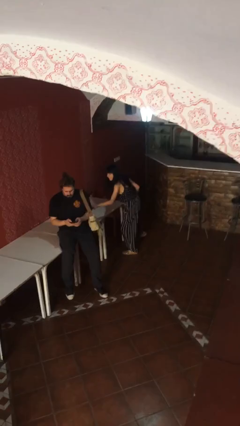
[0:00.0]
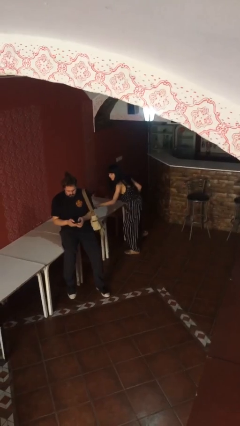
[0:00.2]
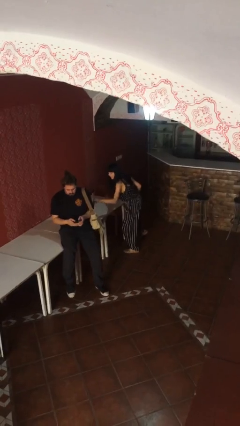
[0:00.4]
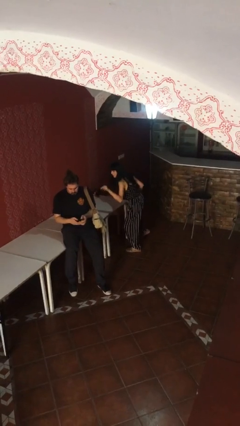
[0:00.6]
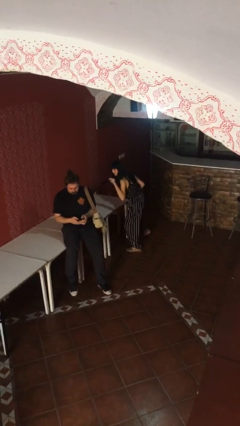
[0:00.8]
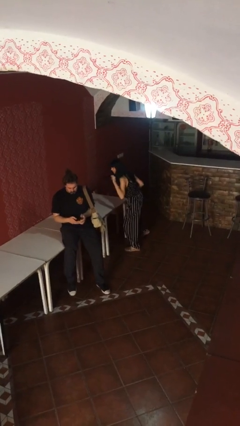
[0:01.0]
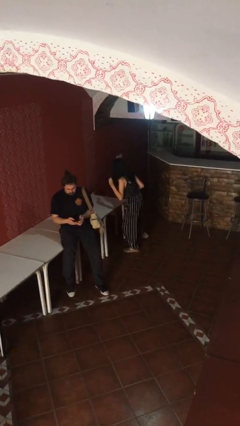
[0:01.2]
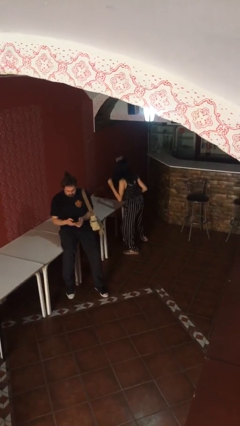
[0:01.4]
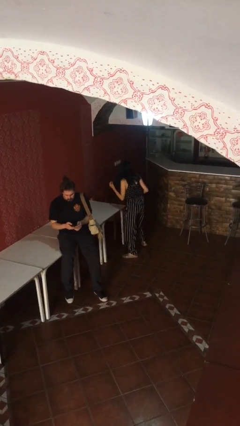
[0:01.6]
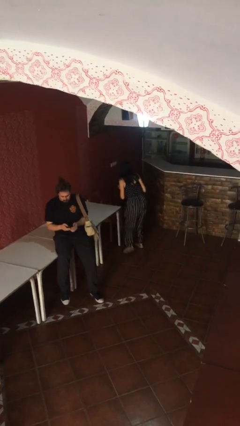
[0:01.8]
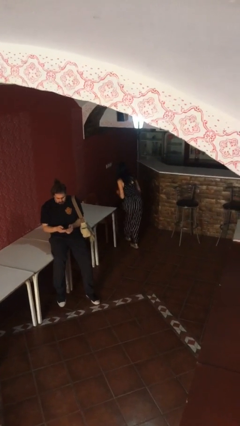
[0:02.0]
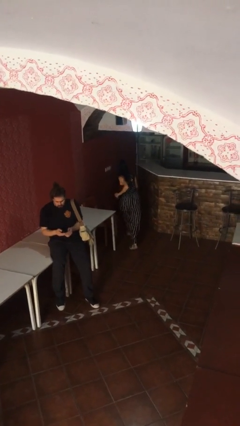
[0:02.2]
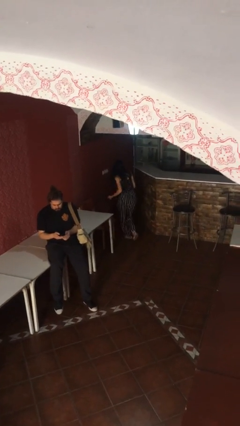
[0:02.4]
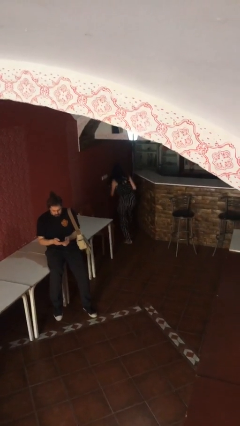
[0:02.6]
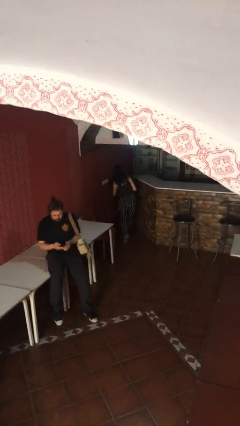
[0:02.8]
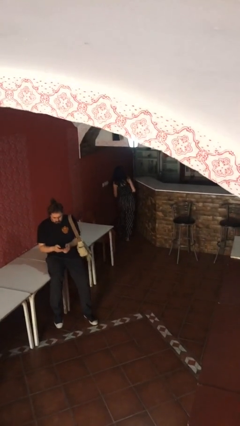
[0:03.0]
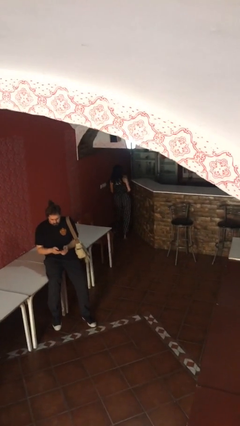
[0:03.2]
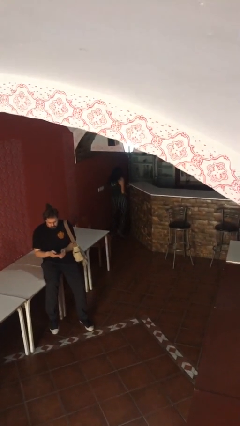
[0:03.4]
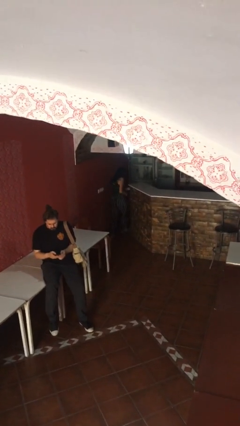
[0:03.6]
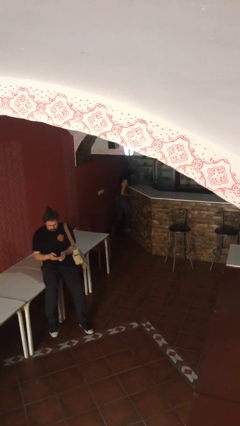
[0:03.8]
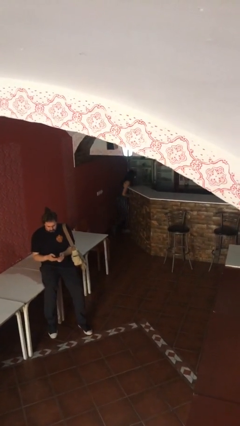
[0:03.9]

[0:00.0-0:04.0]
person steals object from person

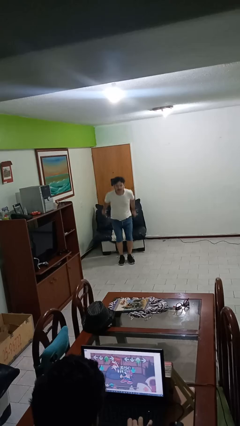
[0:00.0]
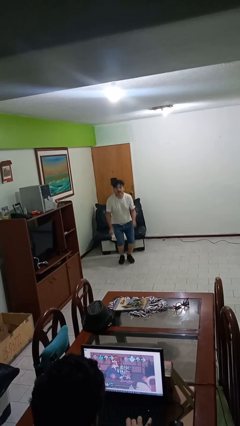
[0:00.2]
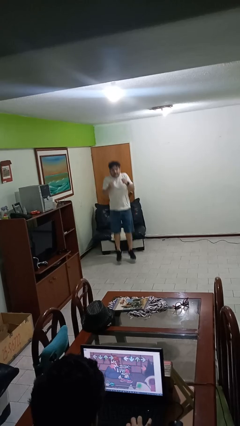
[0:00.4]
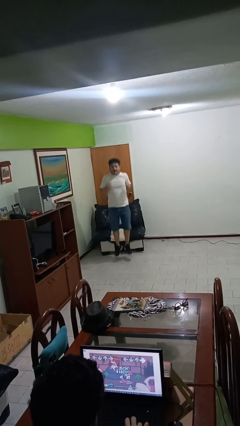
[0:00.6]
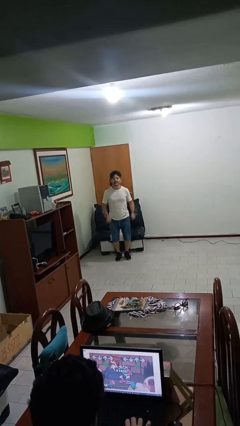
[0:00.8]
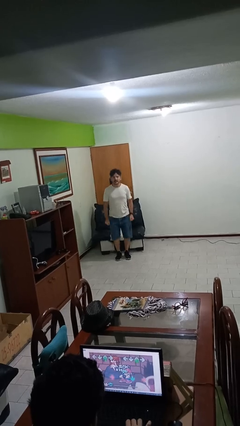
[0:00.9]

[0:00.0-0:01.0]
person jumps

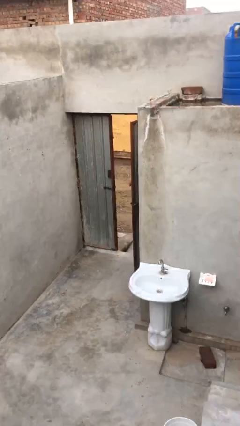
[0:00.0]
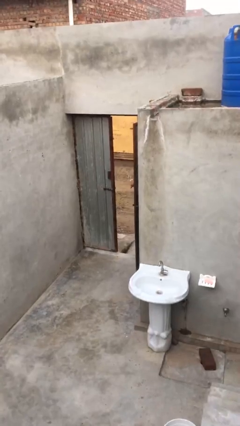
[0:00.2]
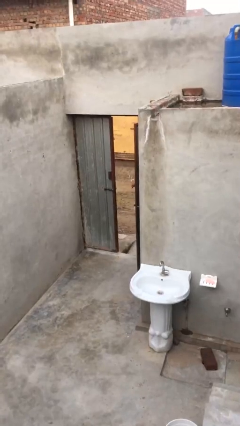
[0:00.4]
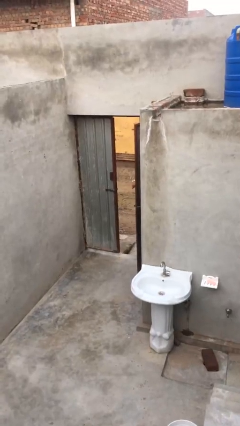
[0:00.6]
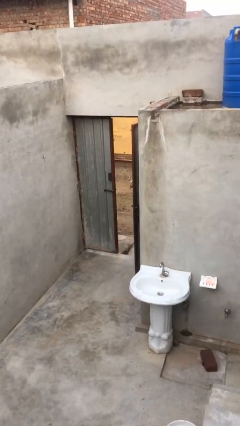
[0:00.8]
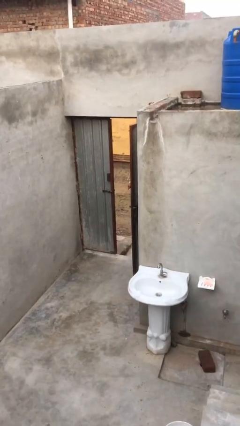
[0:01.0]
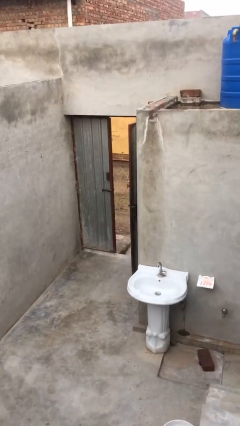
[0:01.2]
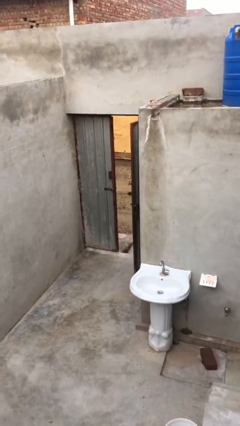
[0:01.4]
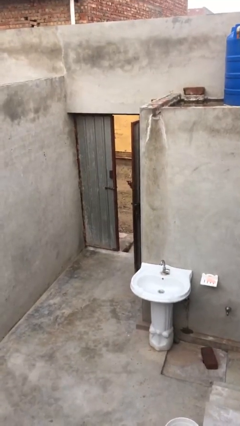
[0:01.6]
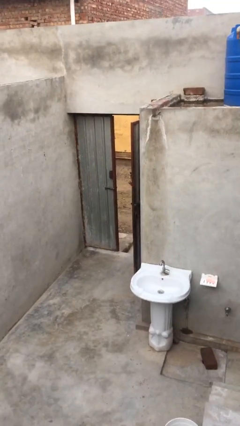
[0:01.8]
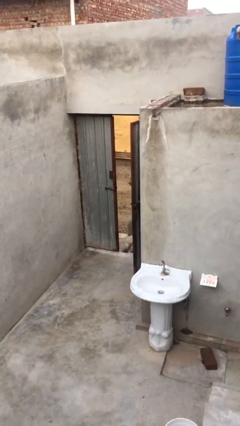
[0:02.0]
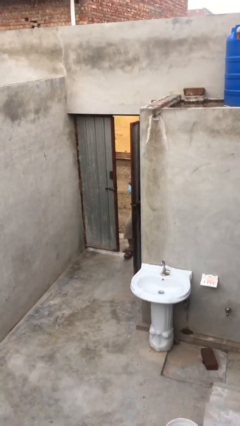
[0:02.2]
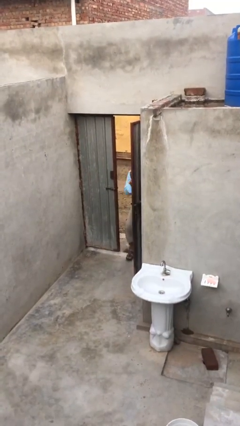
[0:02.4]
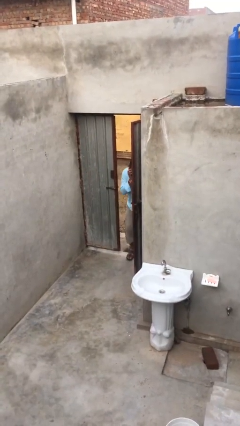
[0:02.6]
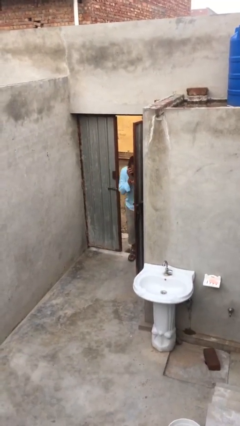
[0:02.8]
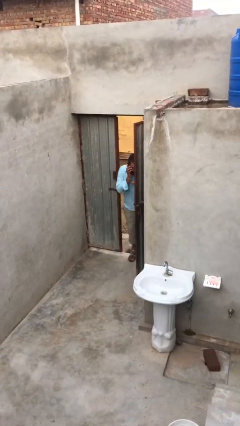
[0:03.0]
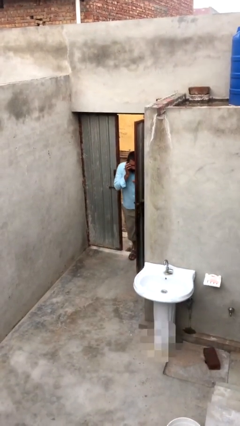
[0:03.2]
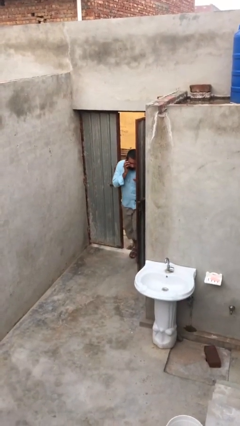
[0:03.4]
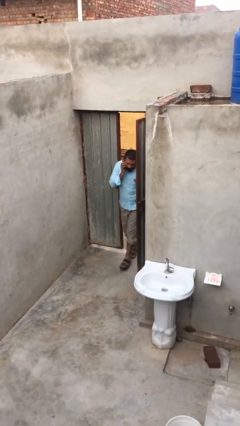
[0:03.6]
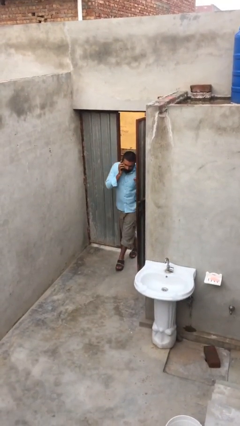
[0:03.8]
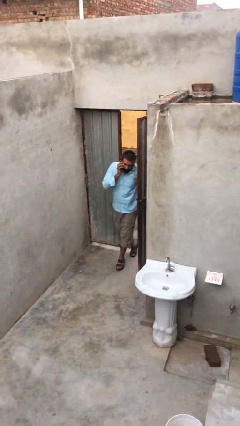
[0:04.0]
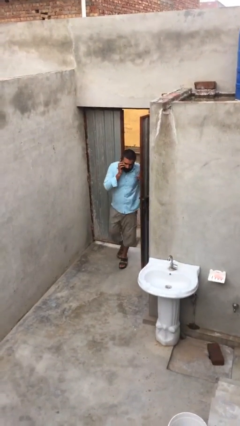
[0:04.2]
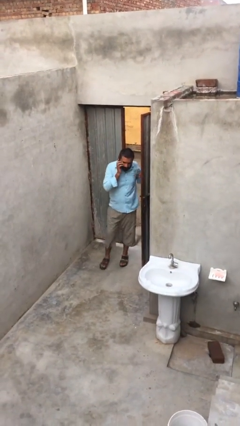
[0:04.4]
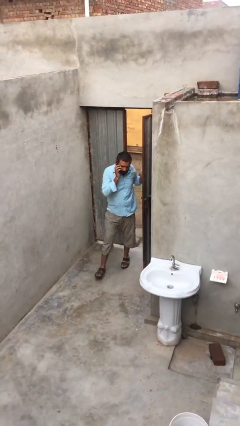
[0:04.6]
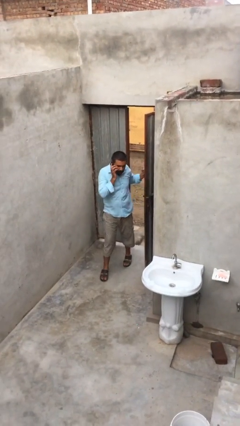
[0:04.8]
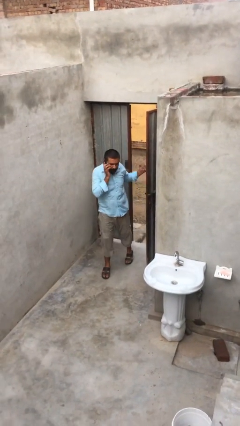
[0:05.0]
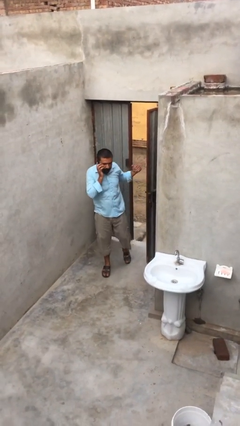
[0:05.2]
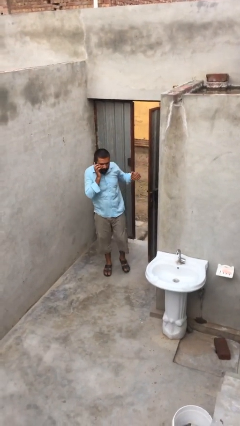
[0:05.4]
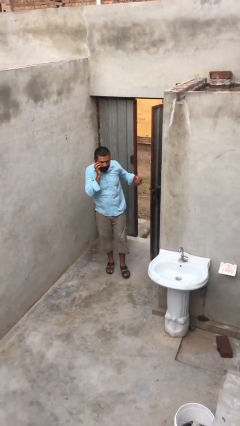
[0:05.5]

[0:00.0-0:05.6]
person enters scene through structure

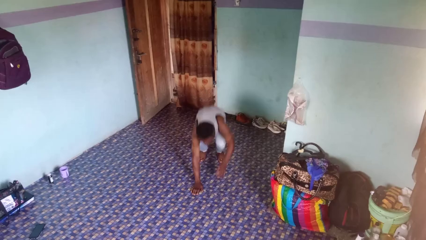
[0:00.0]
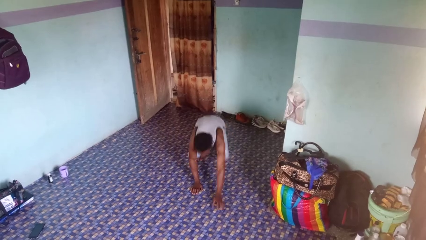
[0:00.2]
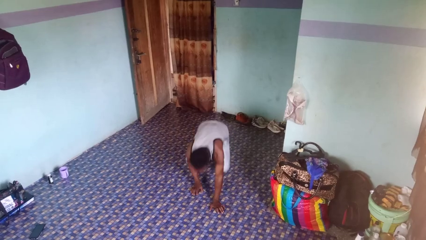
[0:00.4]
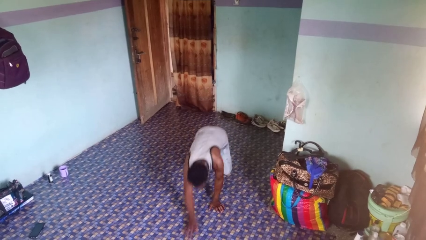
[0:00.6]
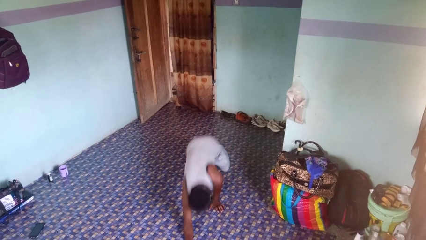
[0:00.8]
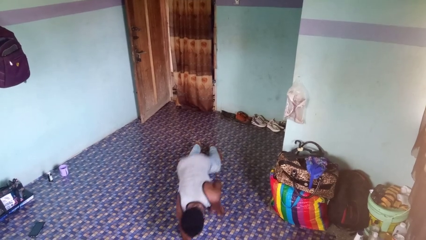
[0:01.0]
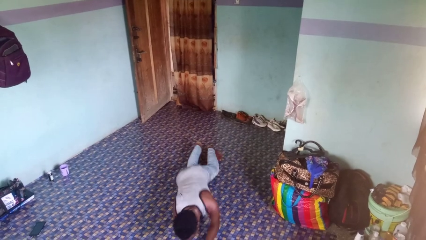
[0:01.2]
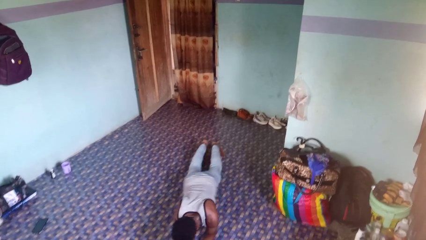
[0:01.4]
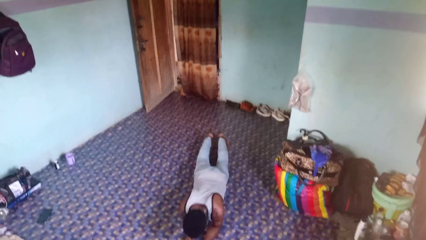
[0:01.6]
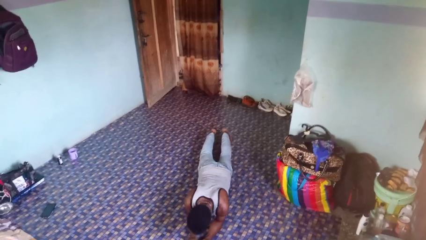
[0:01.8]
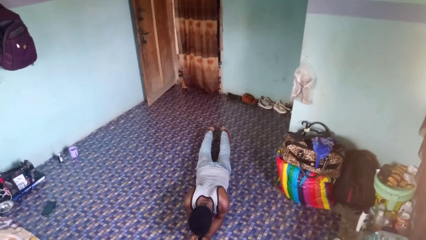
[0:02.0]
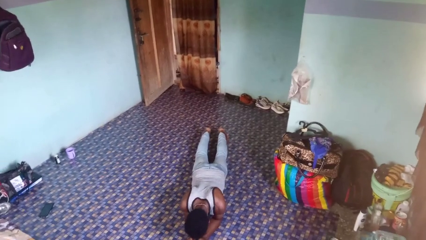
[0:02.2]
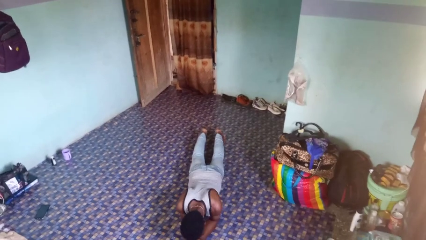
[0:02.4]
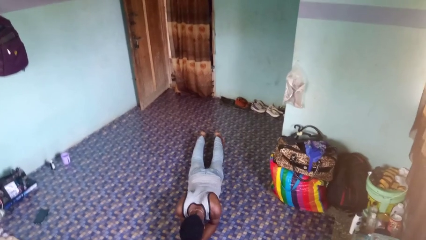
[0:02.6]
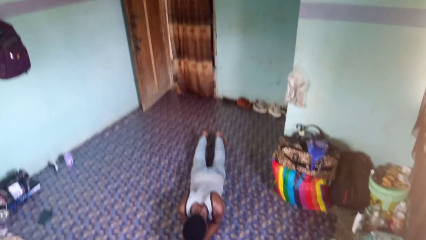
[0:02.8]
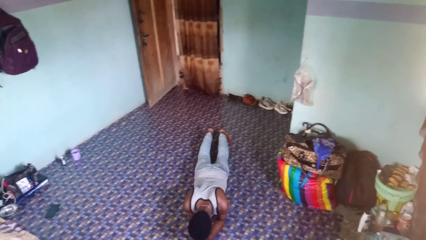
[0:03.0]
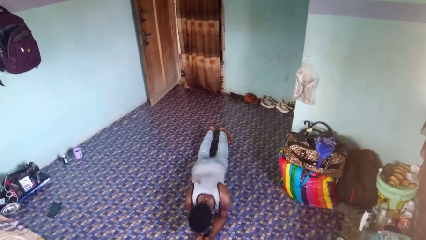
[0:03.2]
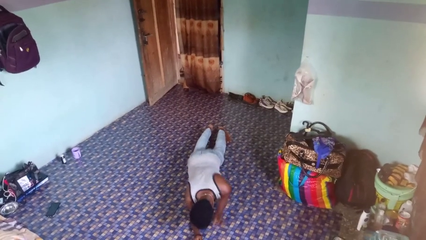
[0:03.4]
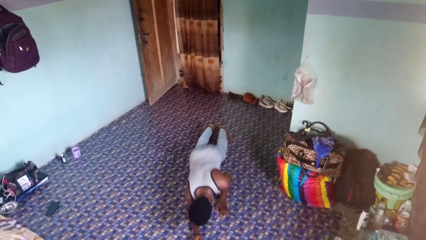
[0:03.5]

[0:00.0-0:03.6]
person exercises with plank

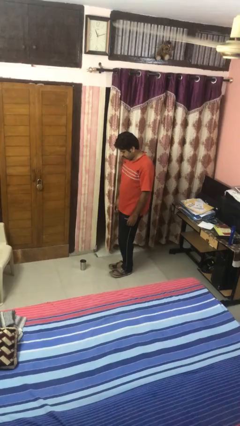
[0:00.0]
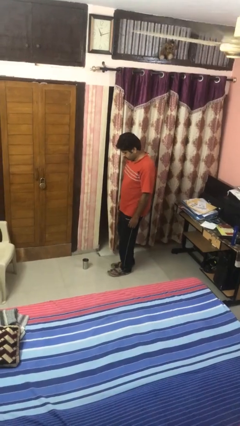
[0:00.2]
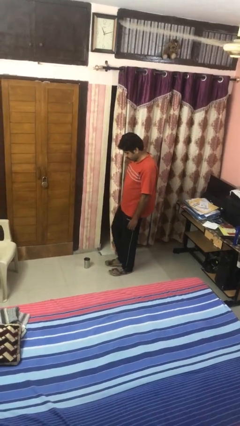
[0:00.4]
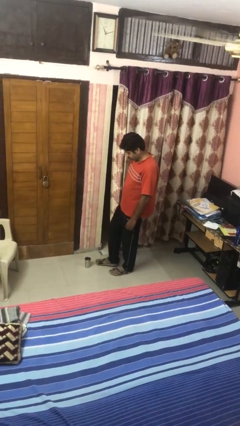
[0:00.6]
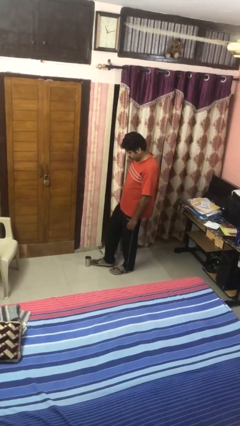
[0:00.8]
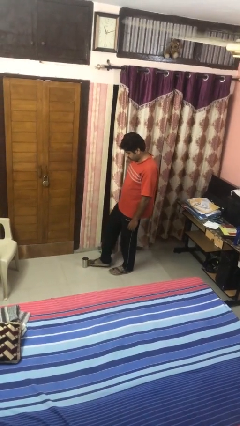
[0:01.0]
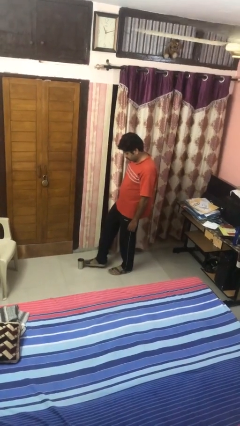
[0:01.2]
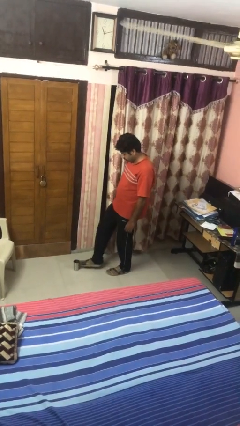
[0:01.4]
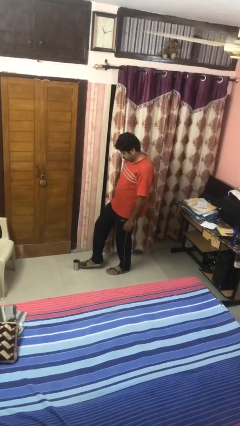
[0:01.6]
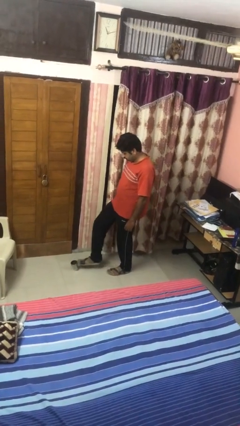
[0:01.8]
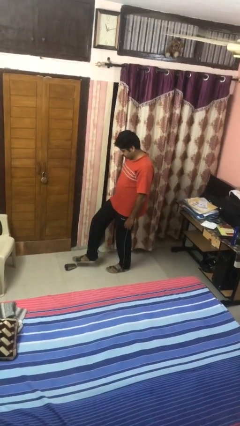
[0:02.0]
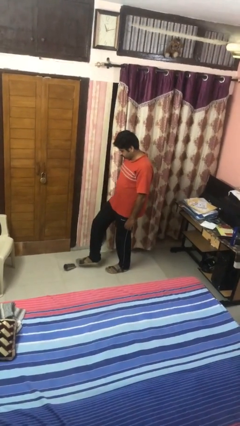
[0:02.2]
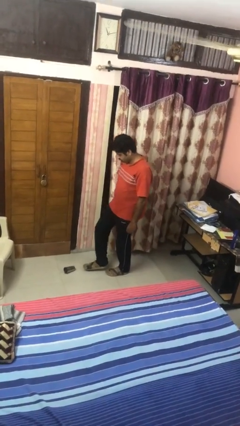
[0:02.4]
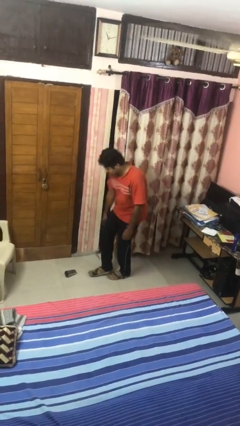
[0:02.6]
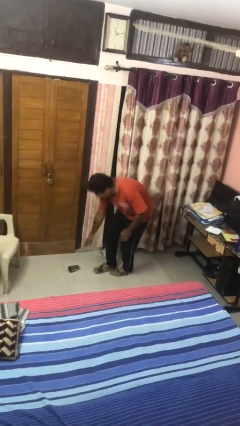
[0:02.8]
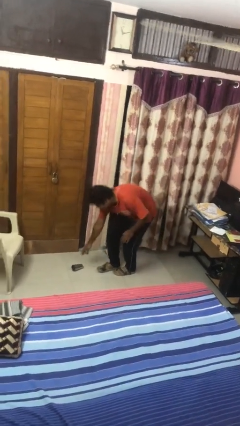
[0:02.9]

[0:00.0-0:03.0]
person spills on floor

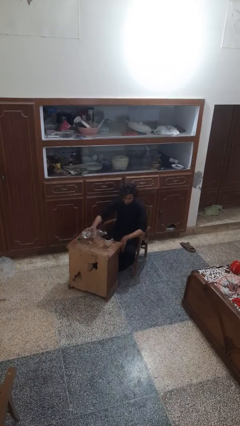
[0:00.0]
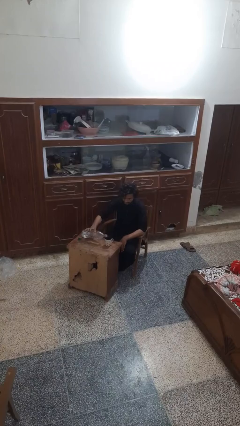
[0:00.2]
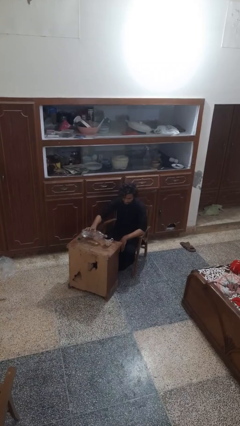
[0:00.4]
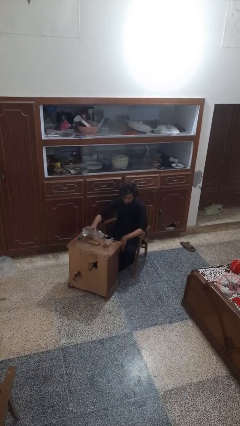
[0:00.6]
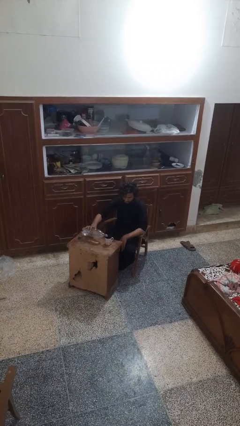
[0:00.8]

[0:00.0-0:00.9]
person pours liquid into cup
